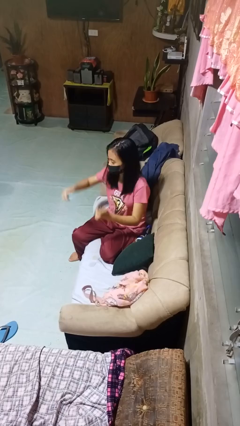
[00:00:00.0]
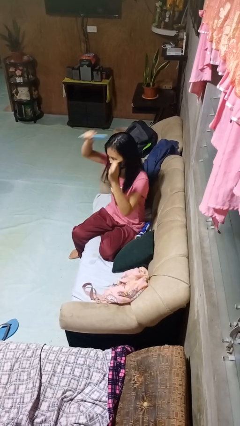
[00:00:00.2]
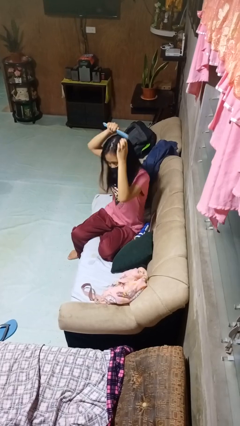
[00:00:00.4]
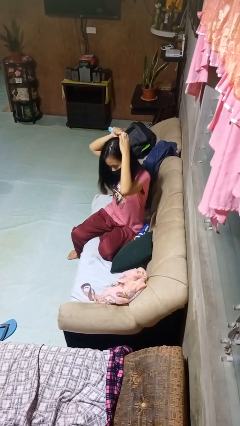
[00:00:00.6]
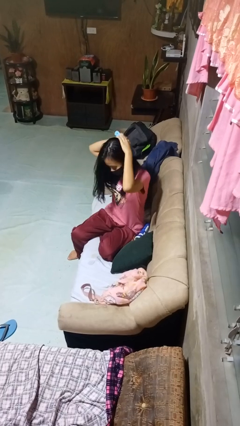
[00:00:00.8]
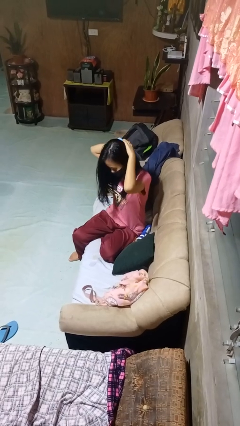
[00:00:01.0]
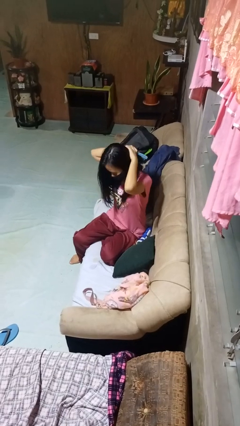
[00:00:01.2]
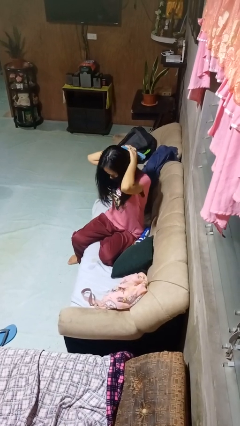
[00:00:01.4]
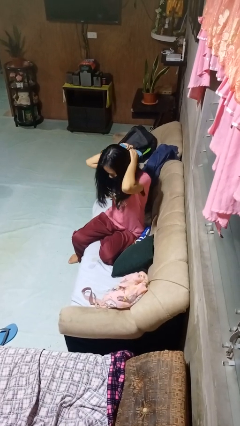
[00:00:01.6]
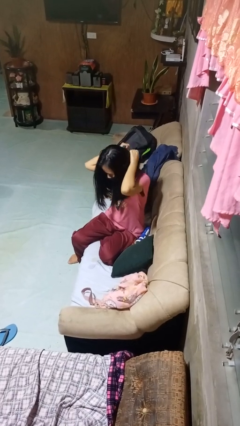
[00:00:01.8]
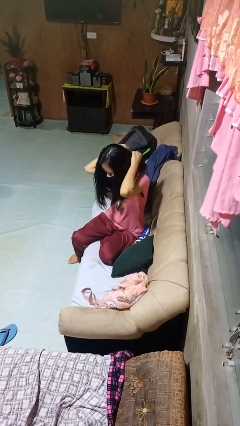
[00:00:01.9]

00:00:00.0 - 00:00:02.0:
person brushes hair

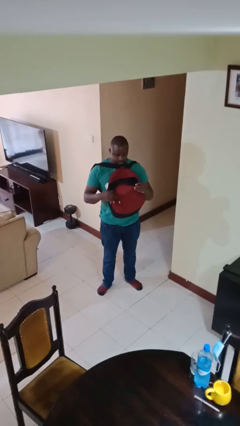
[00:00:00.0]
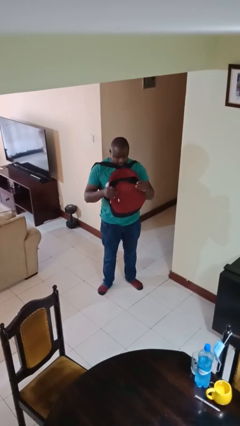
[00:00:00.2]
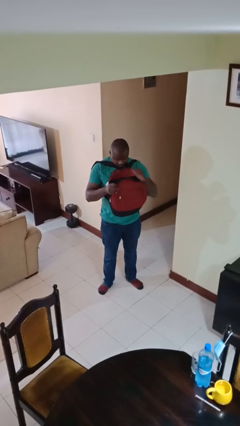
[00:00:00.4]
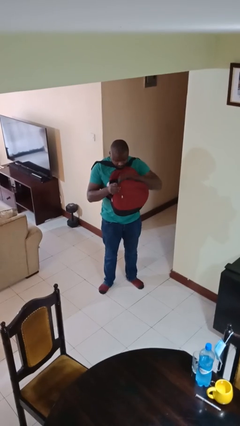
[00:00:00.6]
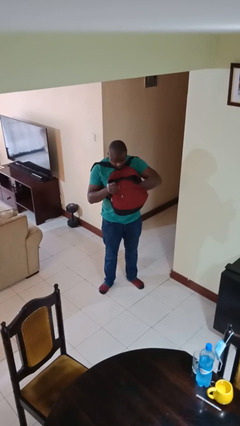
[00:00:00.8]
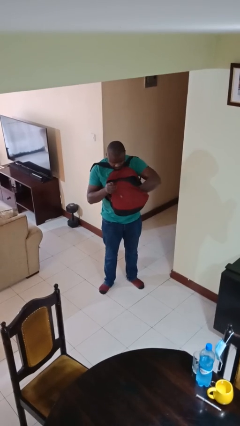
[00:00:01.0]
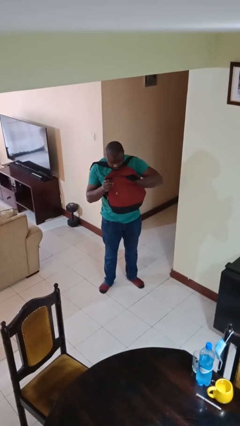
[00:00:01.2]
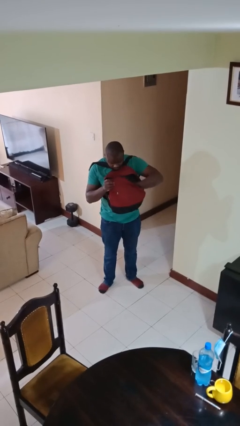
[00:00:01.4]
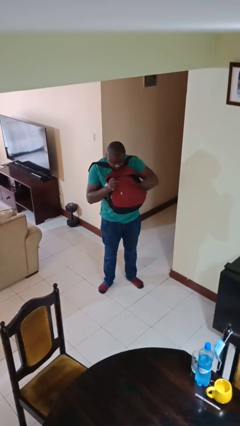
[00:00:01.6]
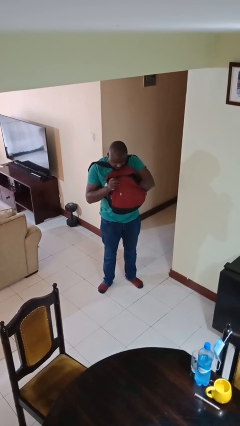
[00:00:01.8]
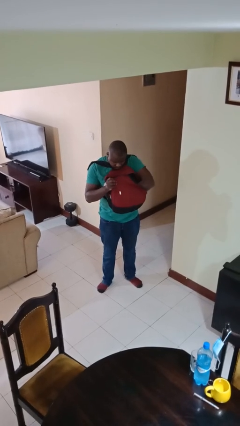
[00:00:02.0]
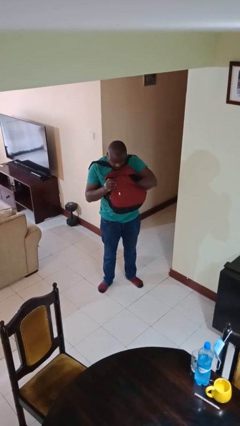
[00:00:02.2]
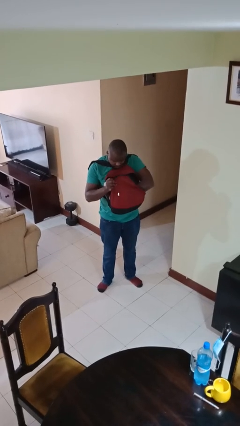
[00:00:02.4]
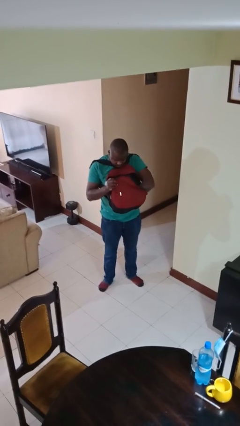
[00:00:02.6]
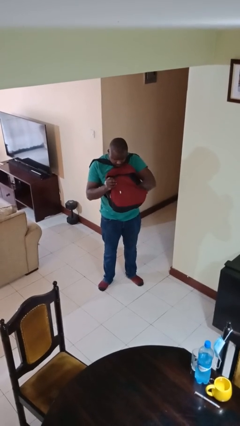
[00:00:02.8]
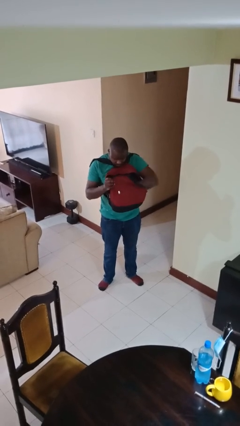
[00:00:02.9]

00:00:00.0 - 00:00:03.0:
person searches in backpack

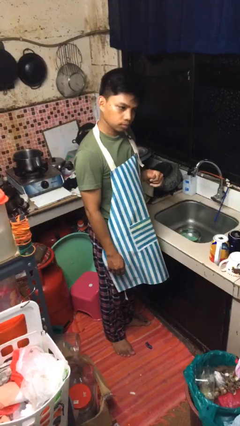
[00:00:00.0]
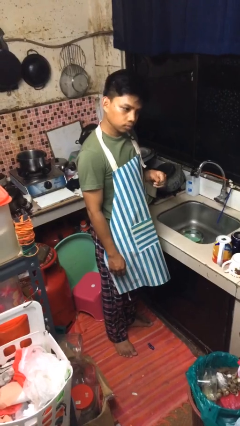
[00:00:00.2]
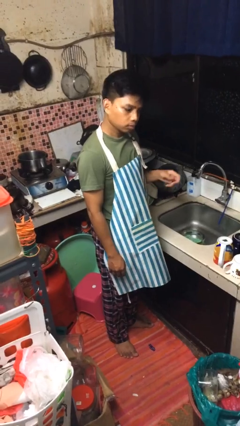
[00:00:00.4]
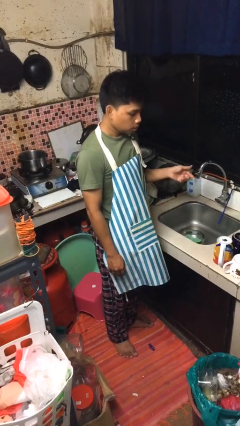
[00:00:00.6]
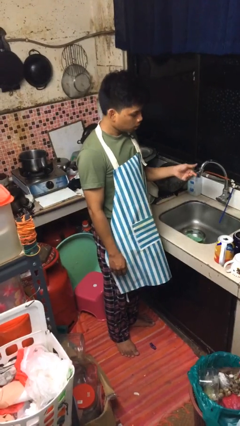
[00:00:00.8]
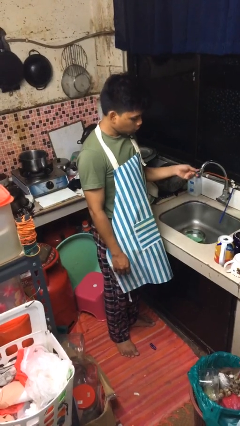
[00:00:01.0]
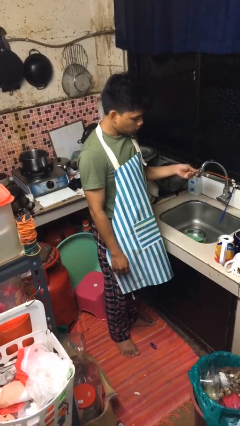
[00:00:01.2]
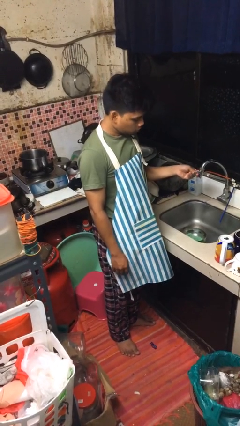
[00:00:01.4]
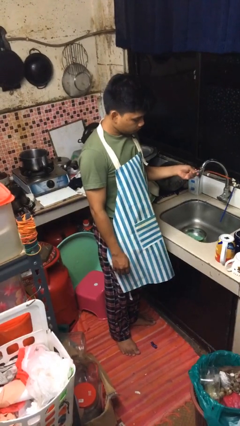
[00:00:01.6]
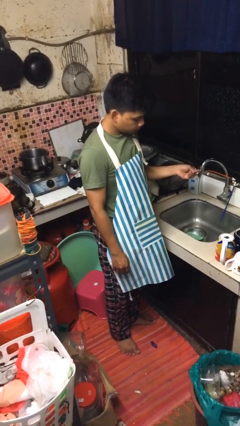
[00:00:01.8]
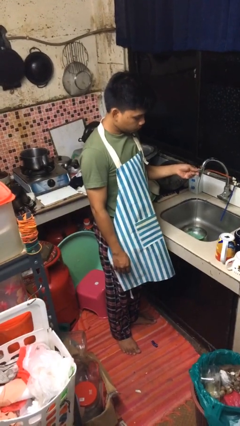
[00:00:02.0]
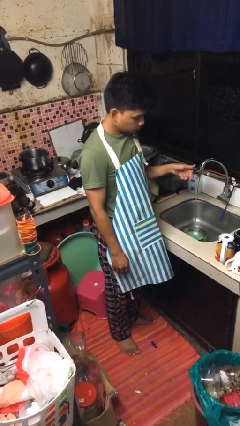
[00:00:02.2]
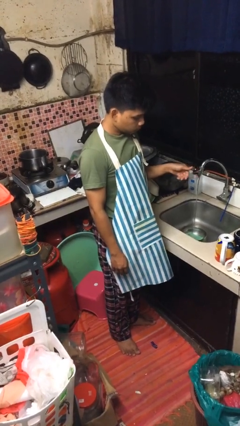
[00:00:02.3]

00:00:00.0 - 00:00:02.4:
person turns on faucet

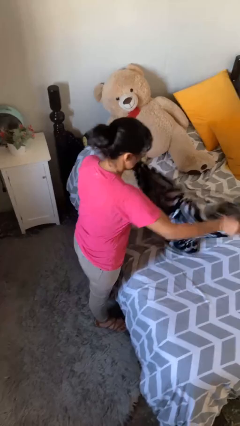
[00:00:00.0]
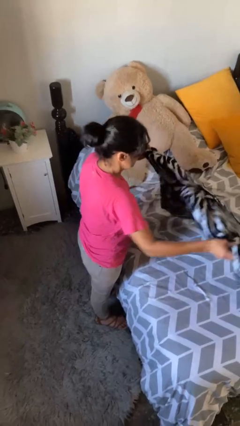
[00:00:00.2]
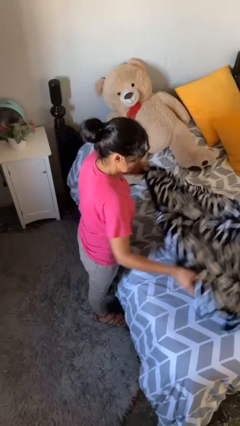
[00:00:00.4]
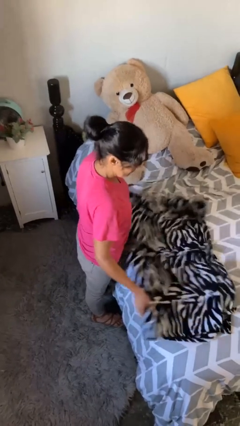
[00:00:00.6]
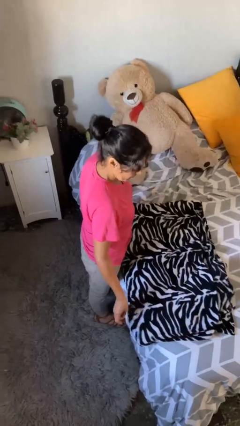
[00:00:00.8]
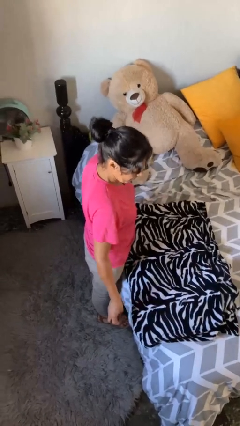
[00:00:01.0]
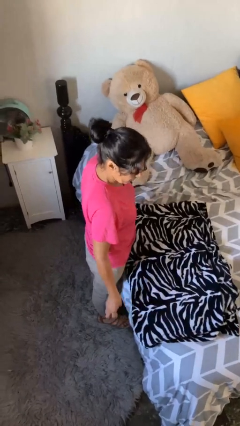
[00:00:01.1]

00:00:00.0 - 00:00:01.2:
person unfolds blanket

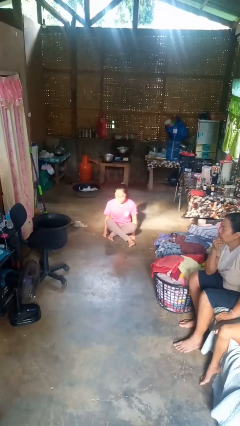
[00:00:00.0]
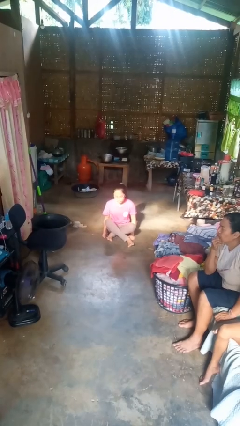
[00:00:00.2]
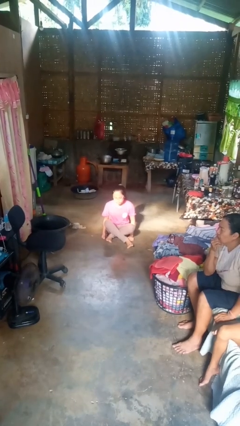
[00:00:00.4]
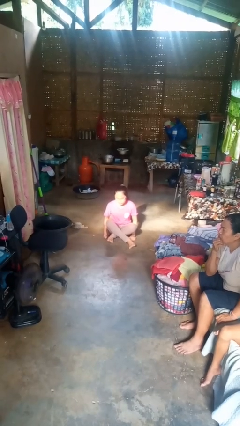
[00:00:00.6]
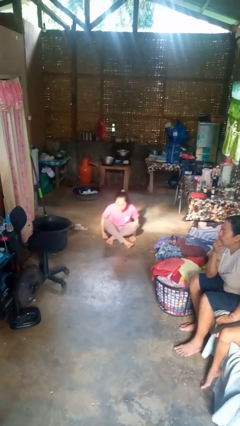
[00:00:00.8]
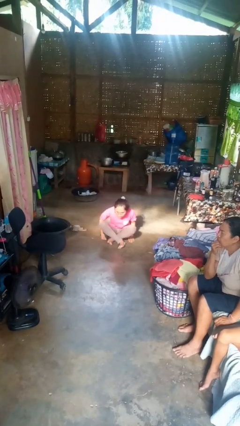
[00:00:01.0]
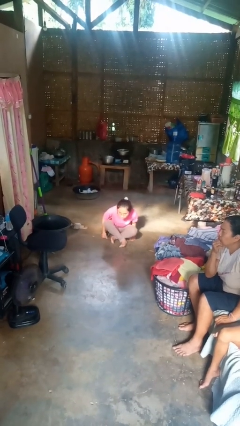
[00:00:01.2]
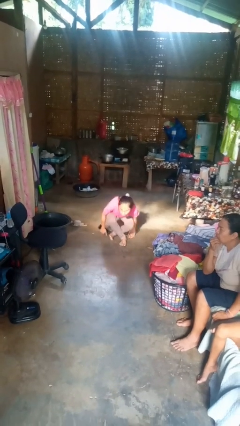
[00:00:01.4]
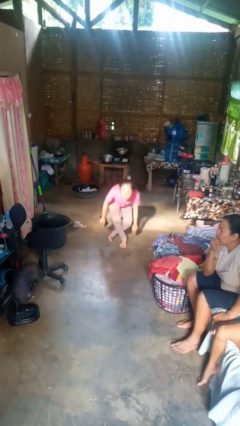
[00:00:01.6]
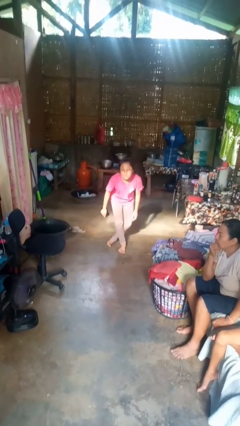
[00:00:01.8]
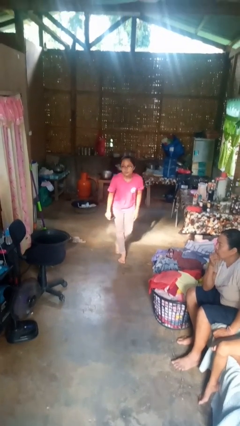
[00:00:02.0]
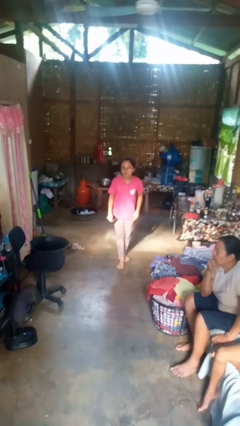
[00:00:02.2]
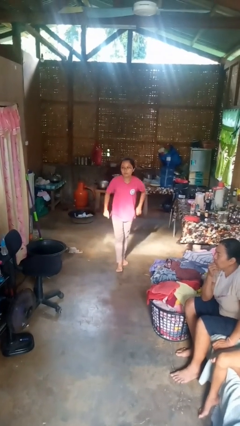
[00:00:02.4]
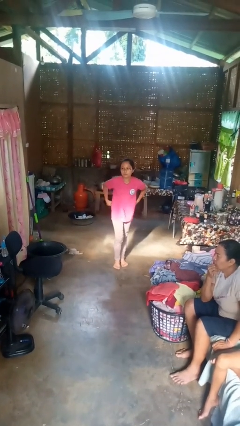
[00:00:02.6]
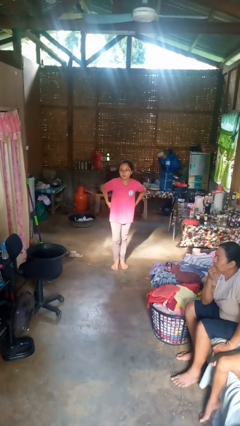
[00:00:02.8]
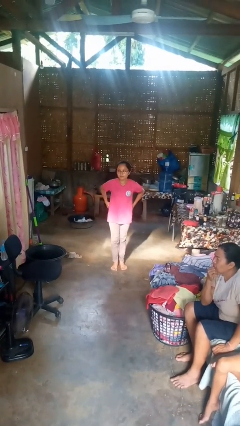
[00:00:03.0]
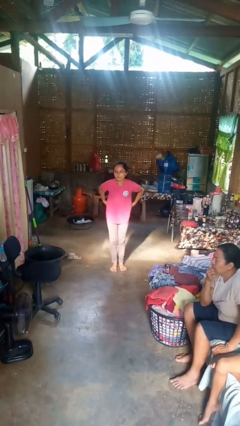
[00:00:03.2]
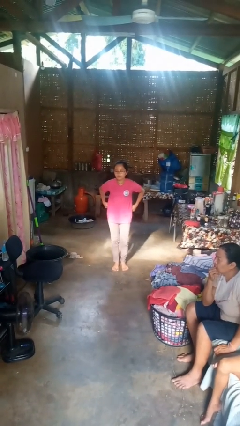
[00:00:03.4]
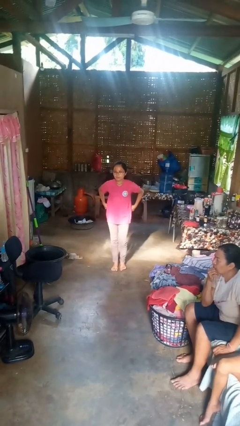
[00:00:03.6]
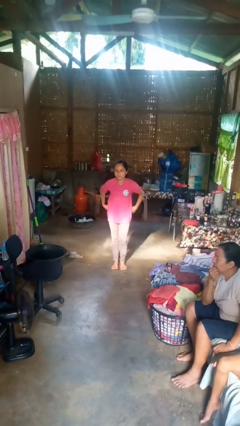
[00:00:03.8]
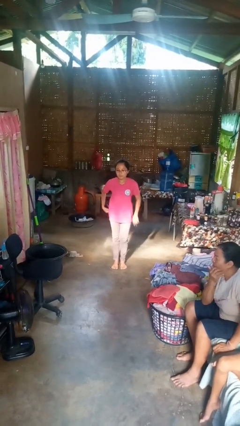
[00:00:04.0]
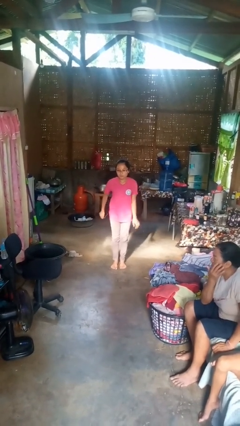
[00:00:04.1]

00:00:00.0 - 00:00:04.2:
person stands up from floor

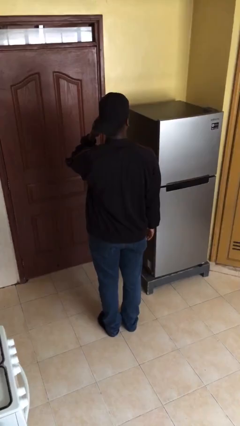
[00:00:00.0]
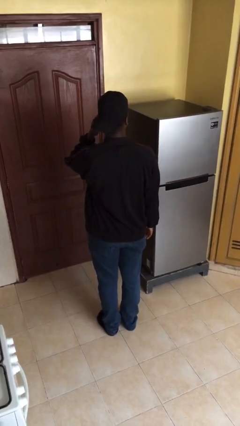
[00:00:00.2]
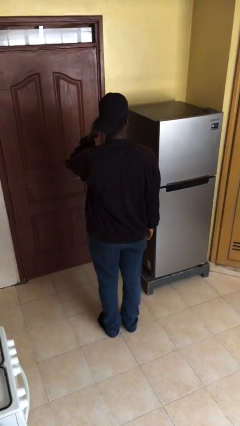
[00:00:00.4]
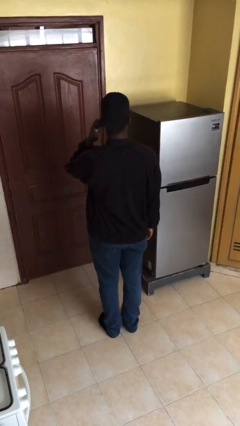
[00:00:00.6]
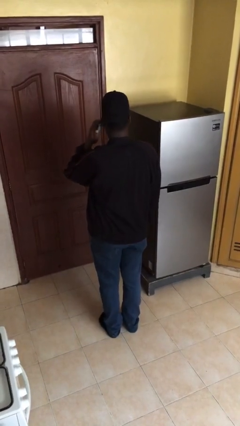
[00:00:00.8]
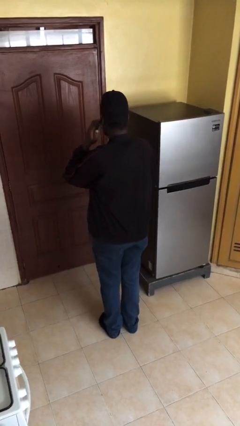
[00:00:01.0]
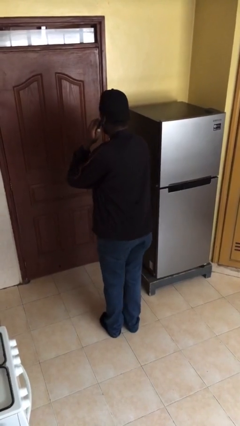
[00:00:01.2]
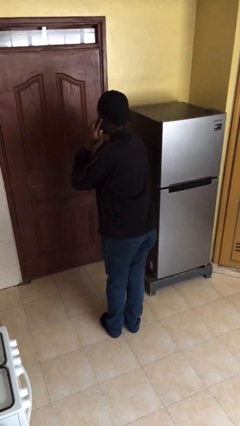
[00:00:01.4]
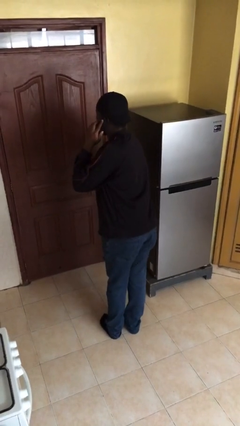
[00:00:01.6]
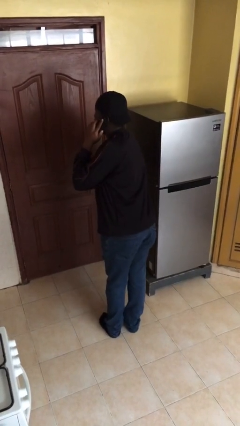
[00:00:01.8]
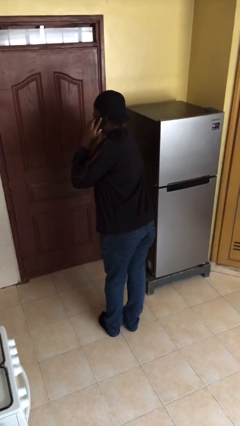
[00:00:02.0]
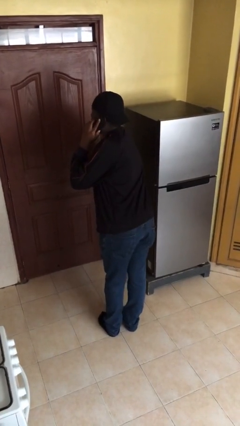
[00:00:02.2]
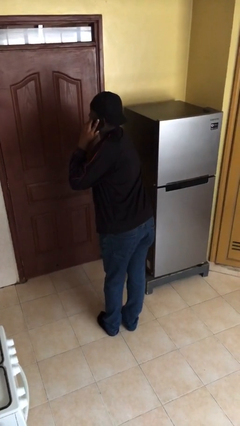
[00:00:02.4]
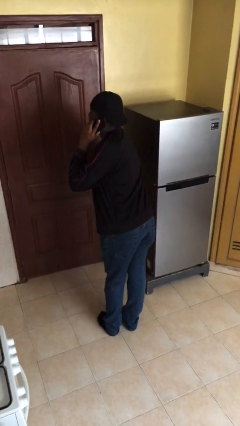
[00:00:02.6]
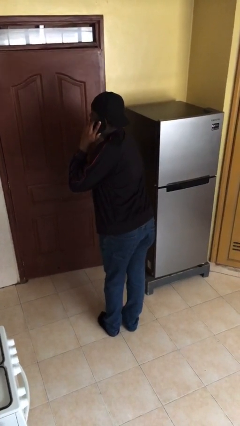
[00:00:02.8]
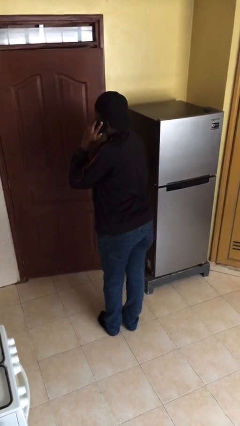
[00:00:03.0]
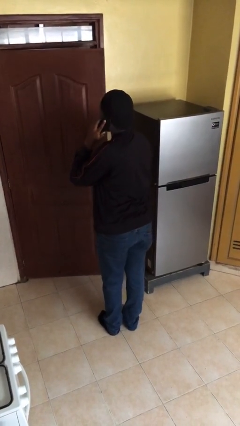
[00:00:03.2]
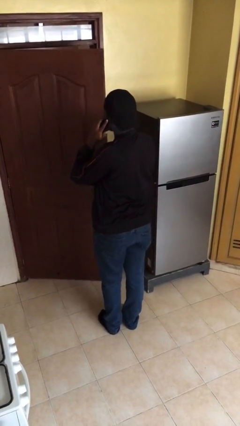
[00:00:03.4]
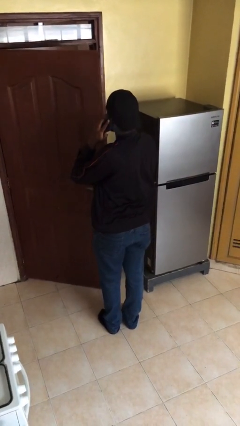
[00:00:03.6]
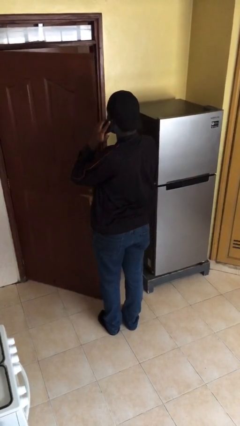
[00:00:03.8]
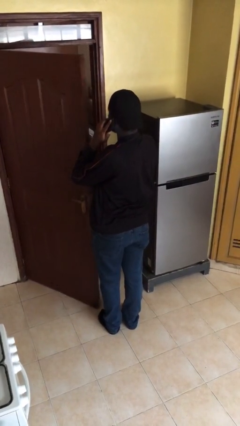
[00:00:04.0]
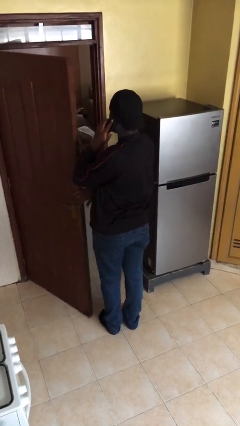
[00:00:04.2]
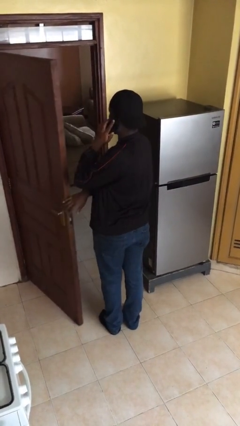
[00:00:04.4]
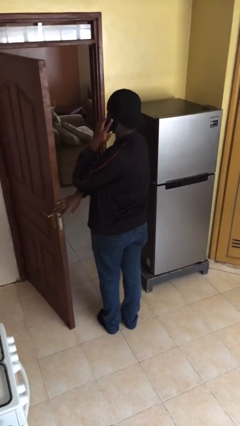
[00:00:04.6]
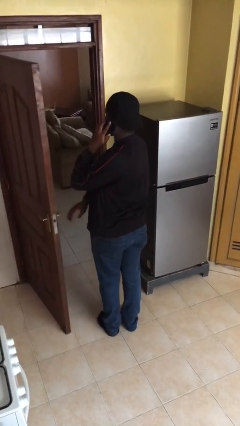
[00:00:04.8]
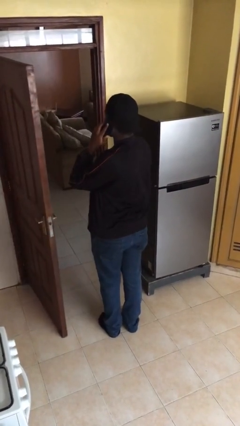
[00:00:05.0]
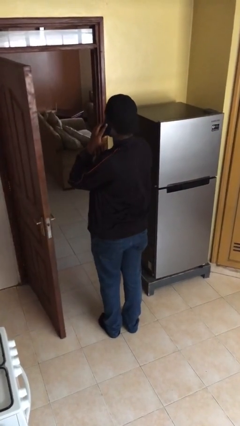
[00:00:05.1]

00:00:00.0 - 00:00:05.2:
person opens facility door
